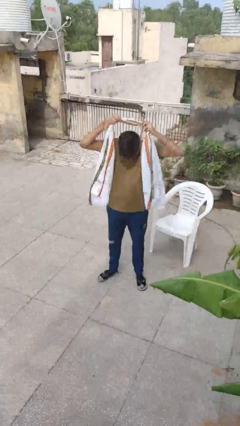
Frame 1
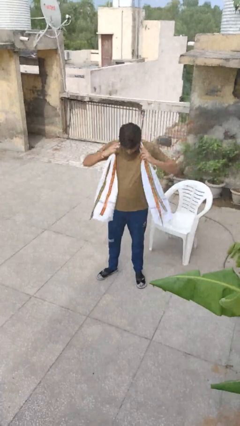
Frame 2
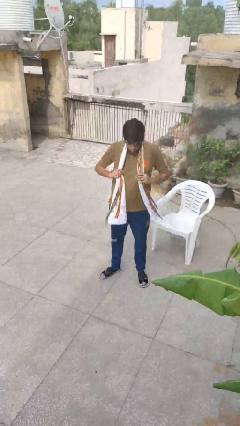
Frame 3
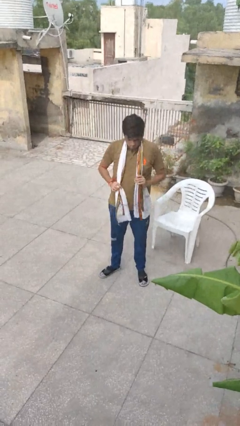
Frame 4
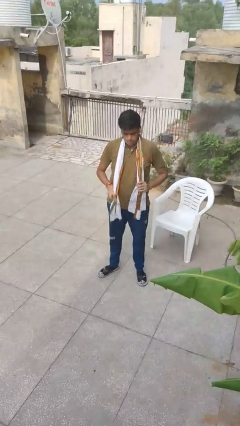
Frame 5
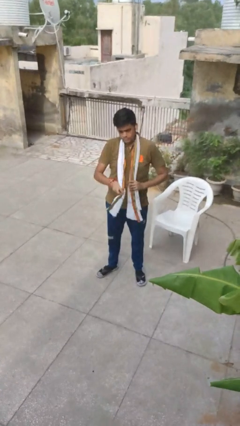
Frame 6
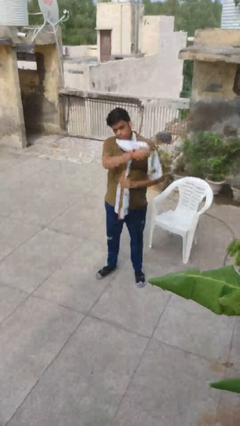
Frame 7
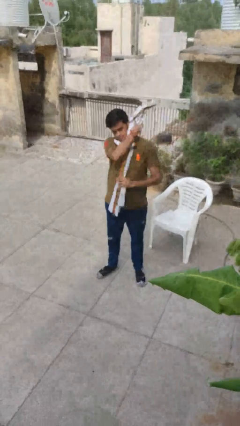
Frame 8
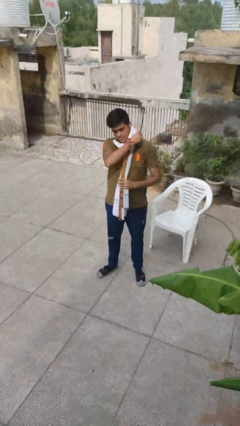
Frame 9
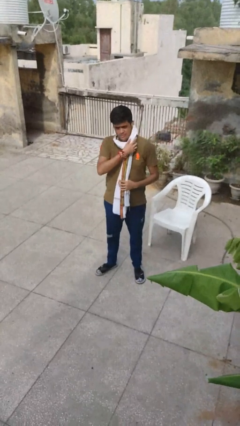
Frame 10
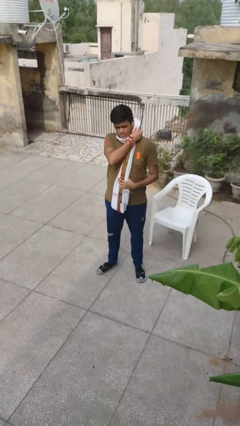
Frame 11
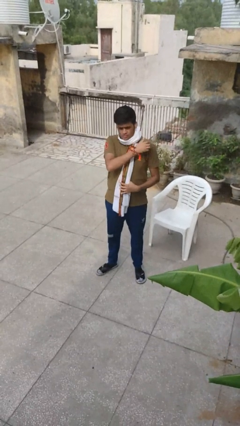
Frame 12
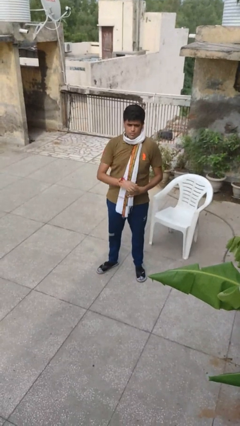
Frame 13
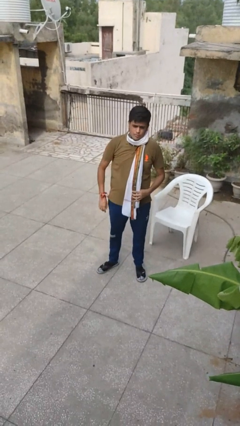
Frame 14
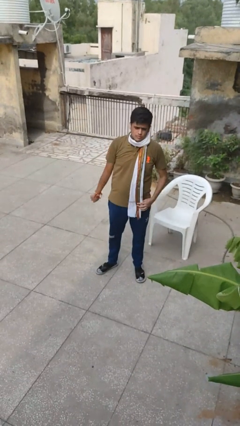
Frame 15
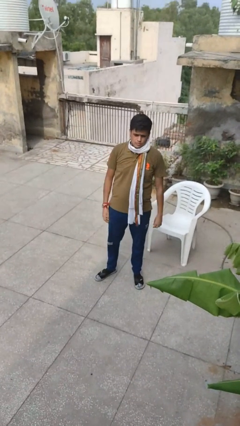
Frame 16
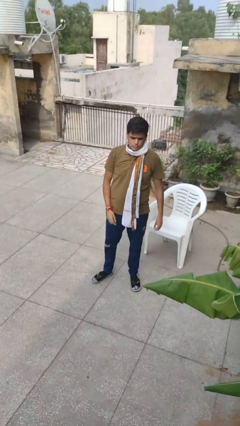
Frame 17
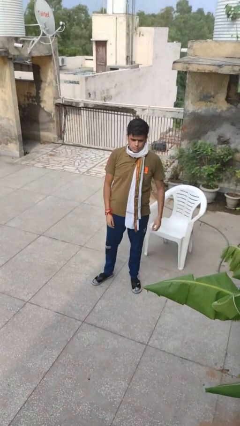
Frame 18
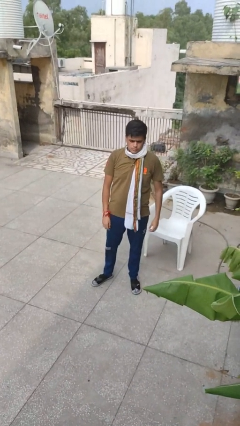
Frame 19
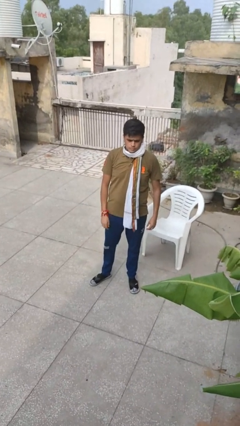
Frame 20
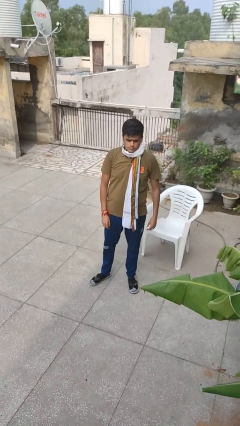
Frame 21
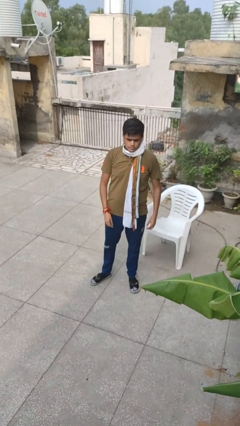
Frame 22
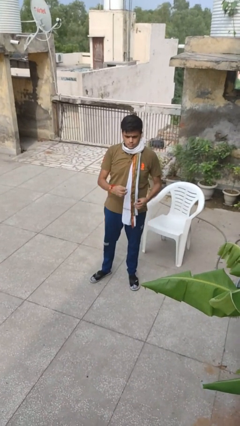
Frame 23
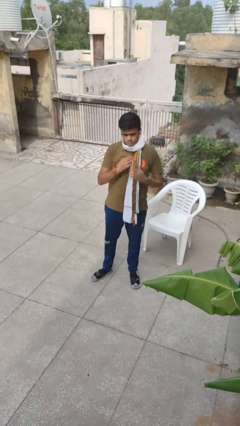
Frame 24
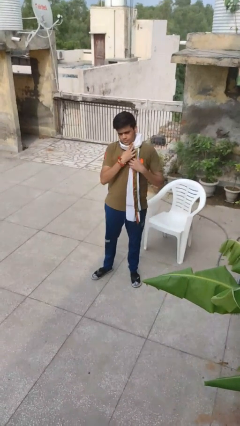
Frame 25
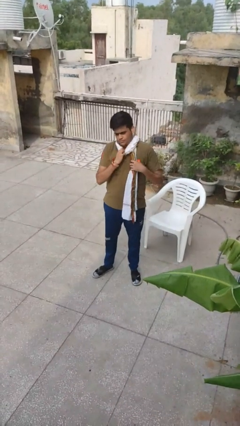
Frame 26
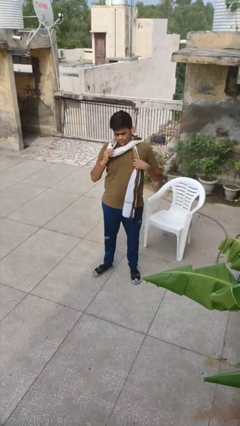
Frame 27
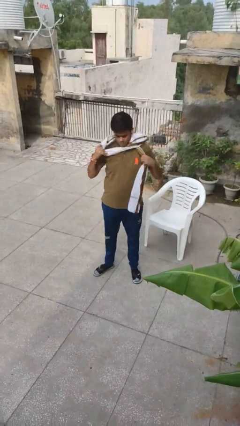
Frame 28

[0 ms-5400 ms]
person puts on scarf

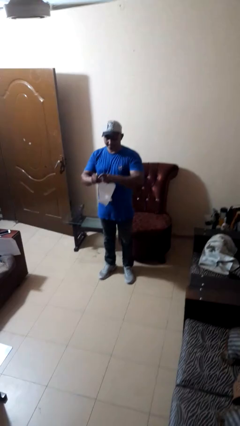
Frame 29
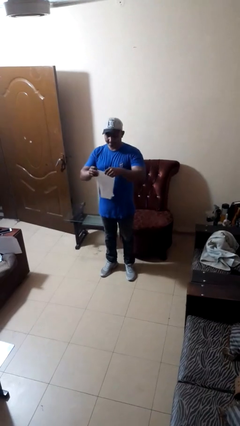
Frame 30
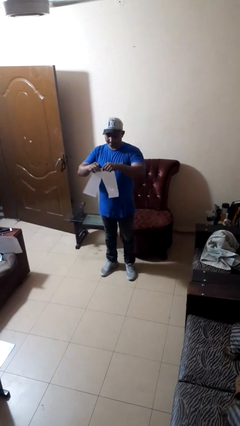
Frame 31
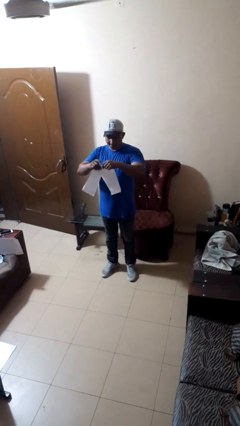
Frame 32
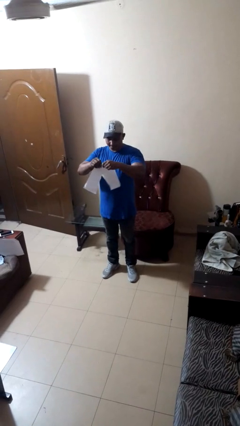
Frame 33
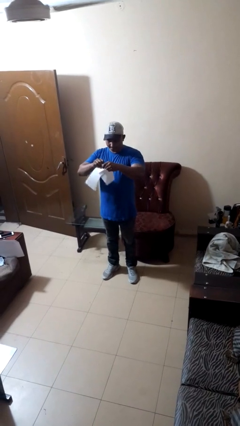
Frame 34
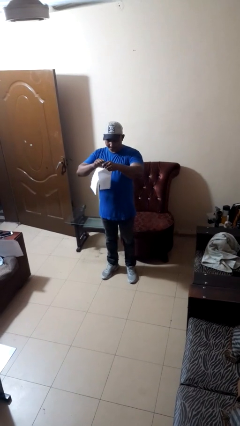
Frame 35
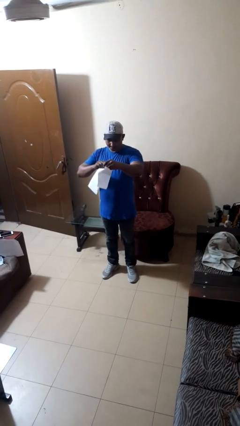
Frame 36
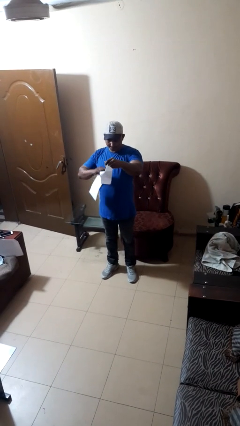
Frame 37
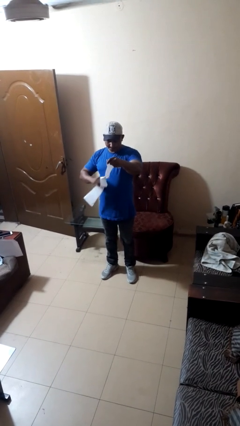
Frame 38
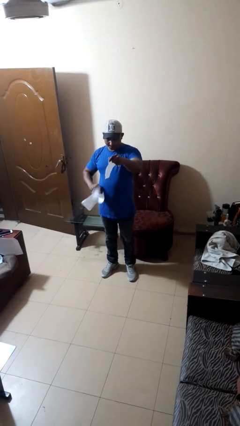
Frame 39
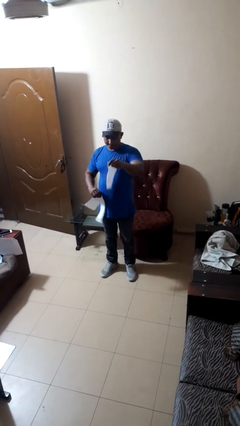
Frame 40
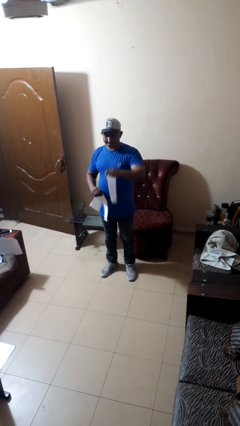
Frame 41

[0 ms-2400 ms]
person tears paper

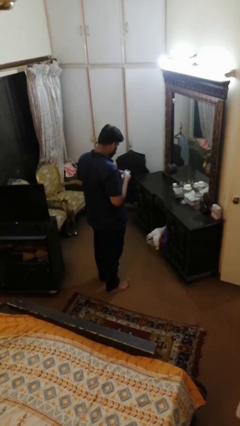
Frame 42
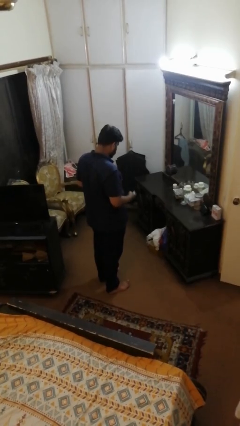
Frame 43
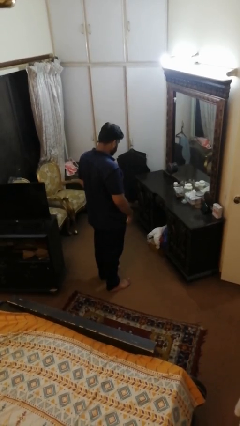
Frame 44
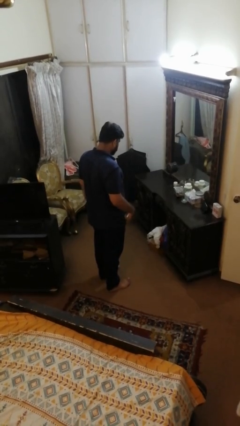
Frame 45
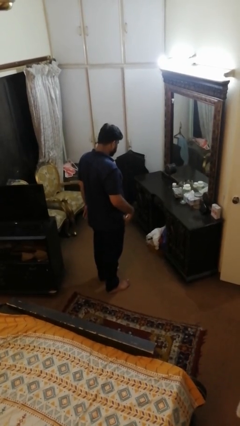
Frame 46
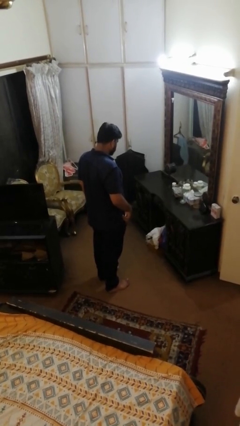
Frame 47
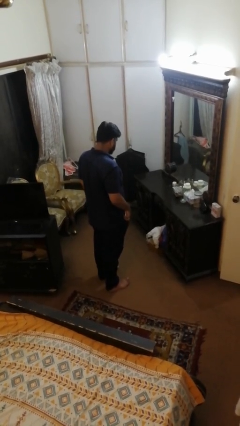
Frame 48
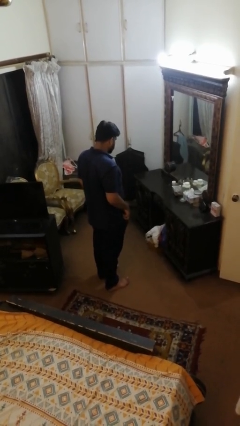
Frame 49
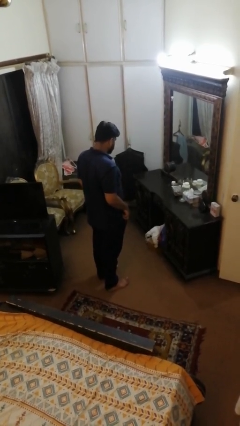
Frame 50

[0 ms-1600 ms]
person puts phone into pocket

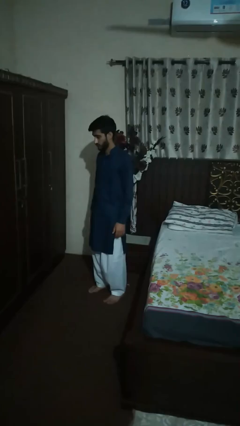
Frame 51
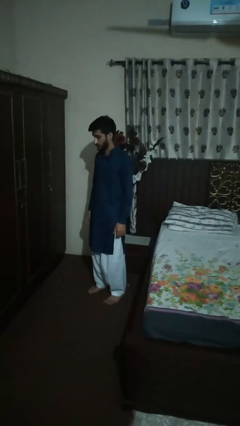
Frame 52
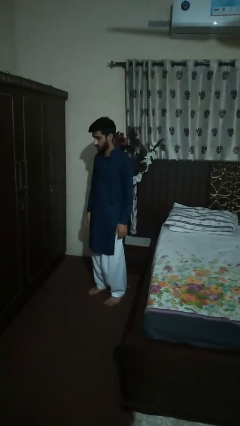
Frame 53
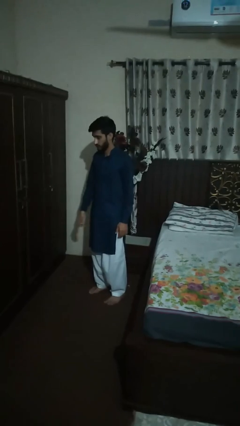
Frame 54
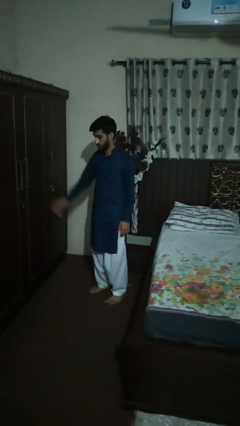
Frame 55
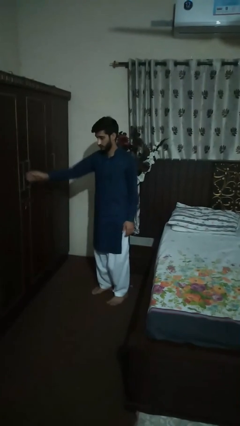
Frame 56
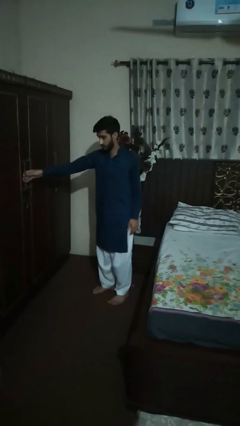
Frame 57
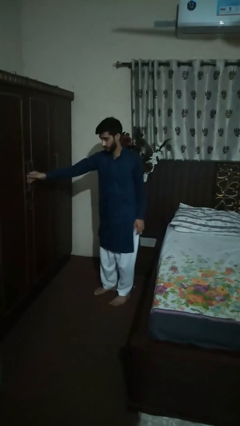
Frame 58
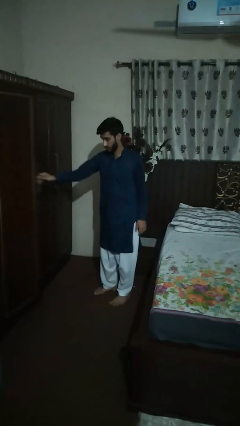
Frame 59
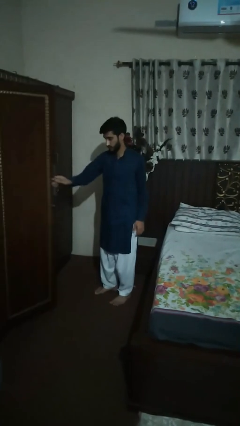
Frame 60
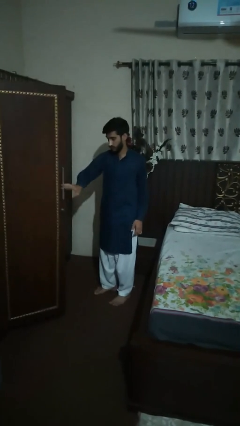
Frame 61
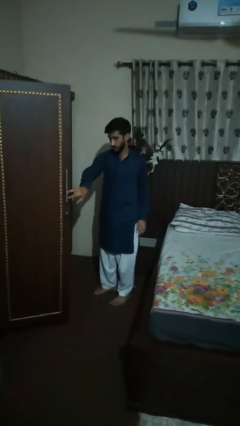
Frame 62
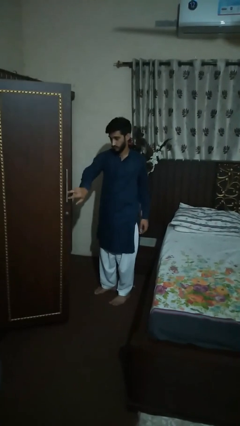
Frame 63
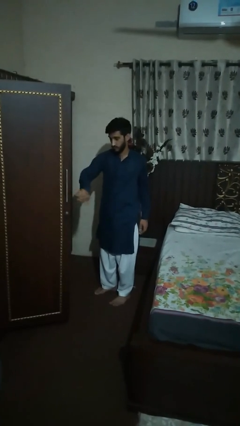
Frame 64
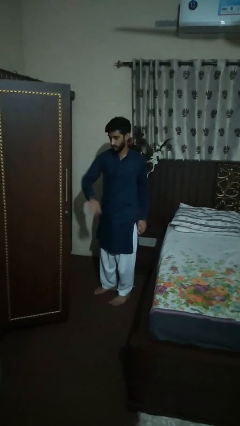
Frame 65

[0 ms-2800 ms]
person opens dresser drawer

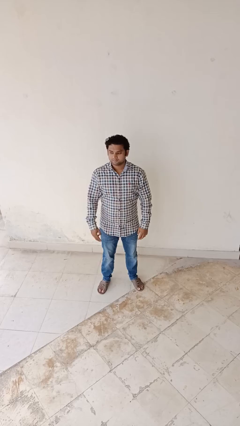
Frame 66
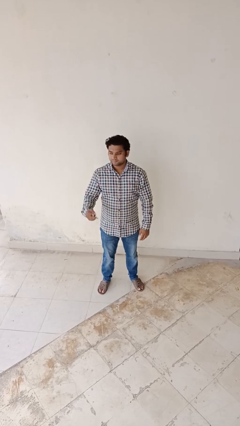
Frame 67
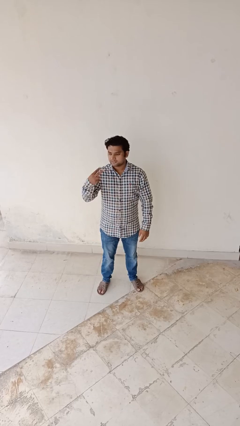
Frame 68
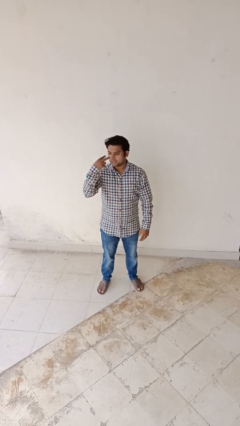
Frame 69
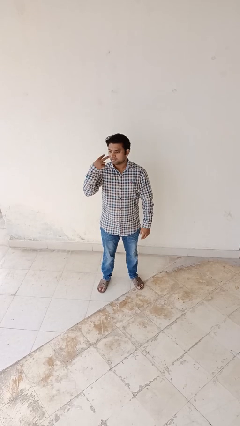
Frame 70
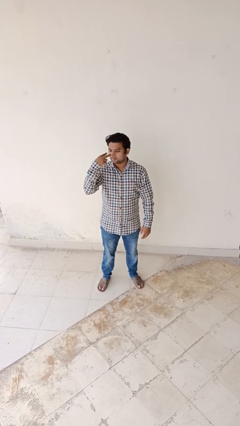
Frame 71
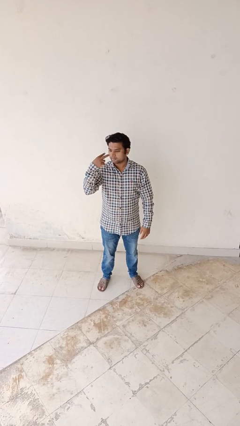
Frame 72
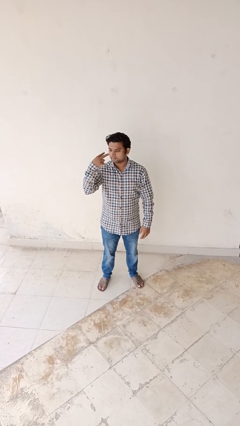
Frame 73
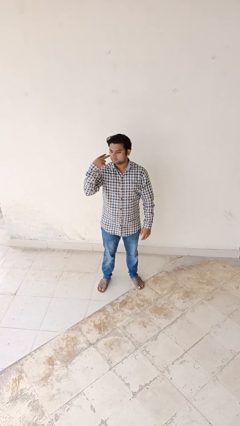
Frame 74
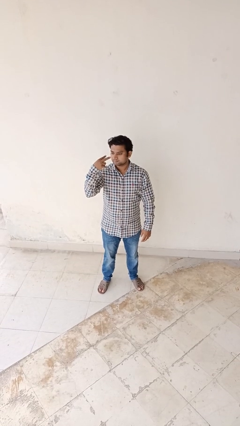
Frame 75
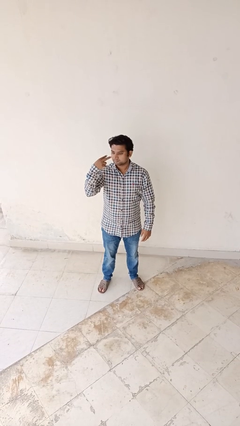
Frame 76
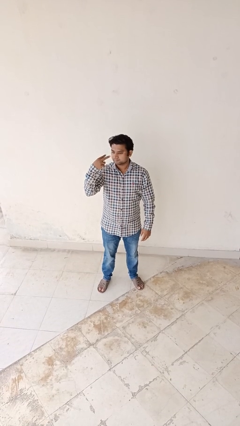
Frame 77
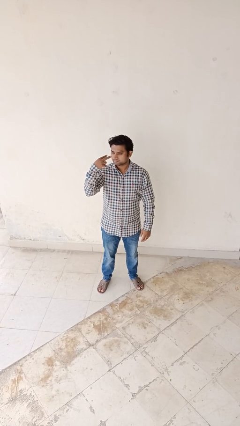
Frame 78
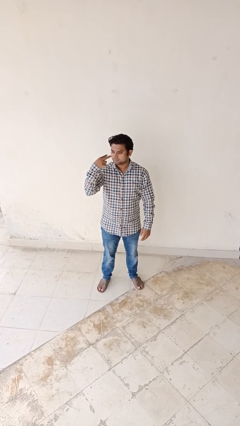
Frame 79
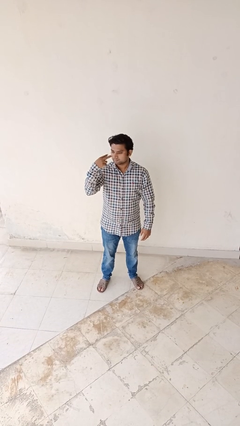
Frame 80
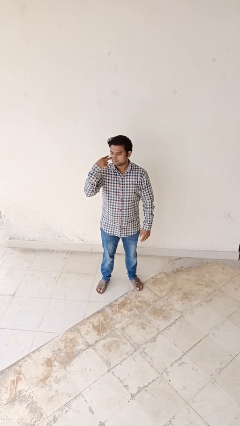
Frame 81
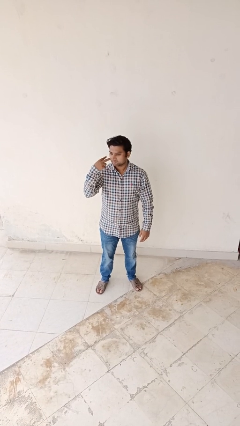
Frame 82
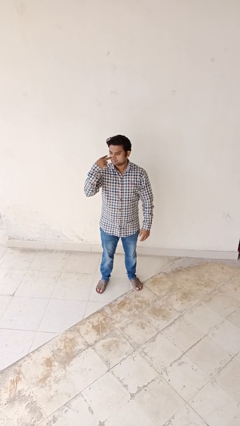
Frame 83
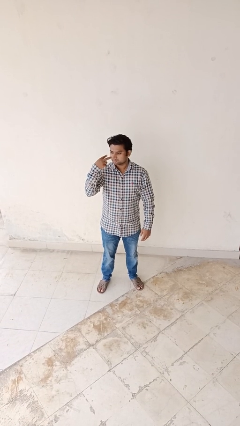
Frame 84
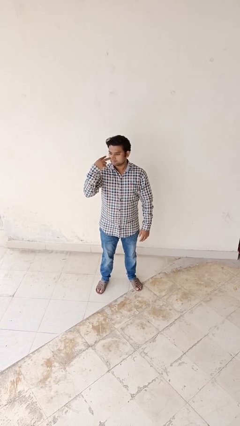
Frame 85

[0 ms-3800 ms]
person gestures watch closely

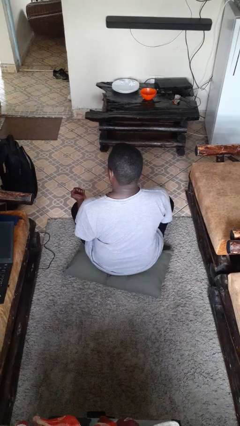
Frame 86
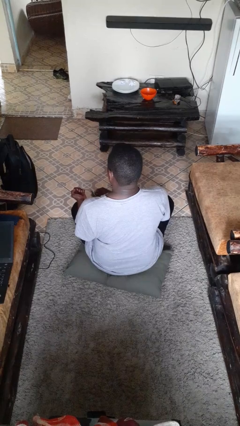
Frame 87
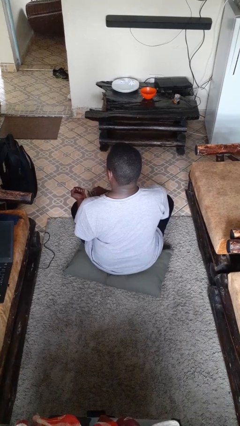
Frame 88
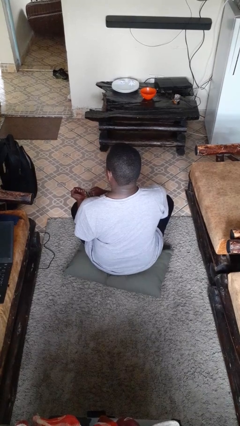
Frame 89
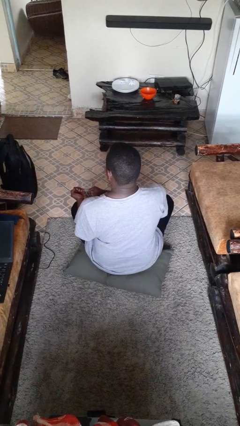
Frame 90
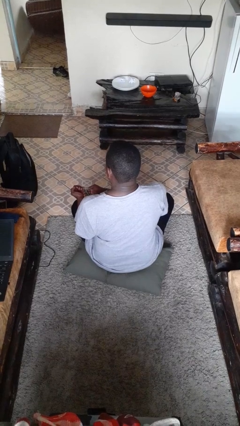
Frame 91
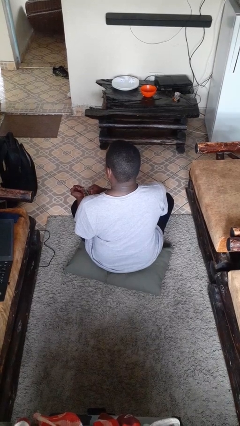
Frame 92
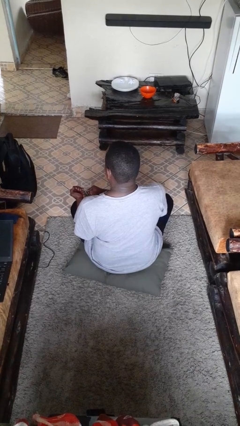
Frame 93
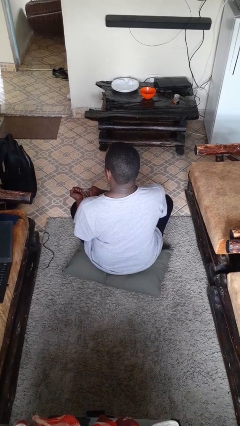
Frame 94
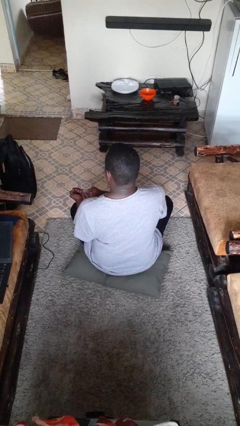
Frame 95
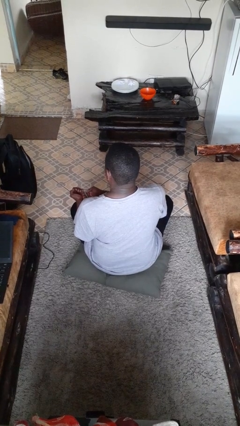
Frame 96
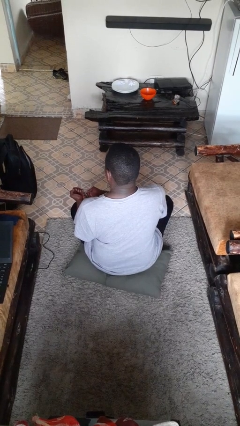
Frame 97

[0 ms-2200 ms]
person clips fingernails
